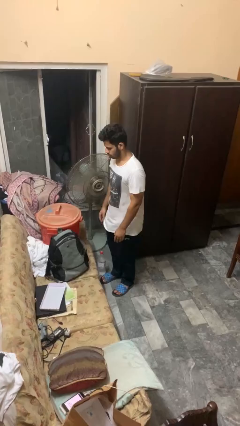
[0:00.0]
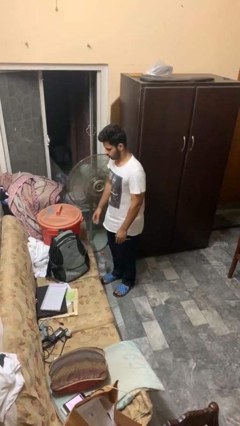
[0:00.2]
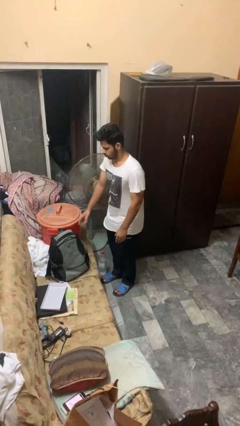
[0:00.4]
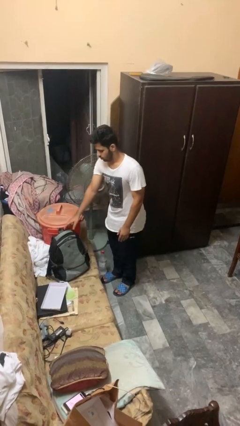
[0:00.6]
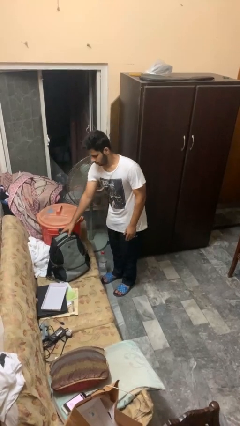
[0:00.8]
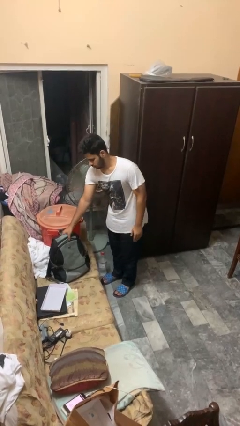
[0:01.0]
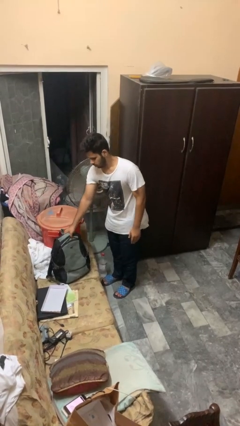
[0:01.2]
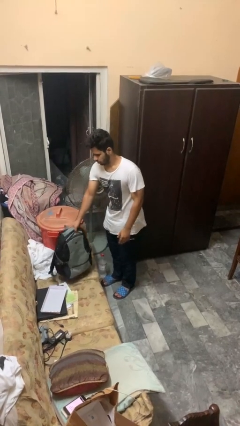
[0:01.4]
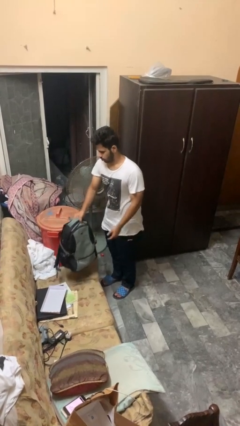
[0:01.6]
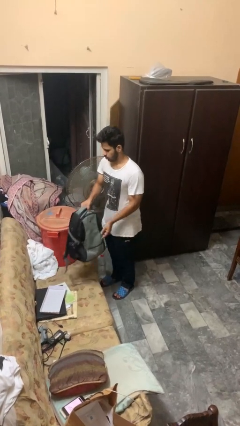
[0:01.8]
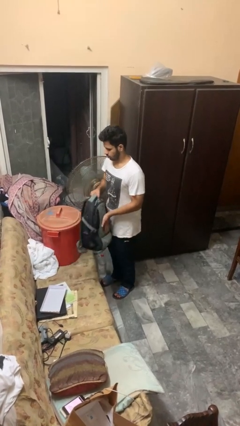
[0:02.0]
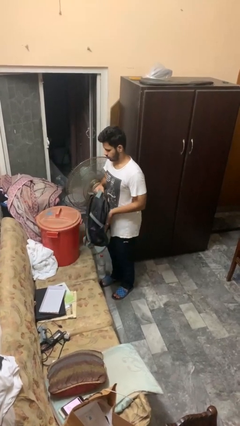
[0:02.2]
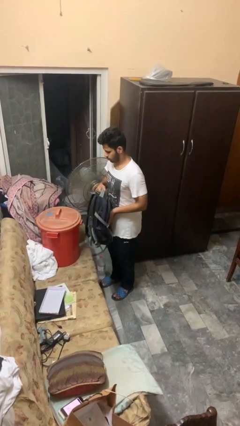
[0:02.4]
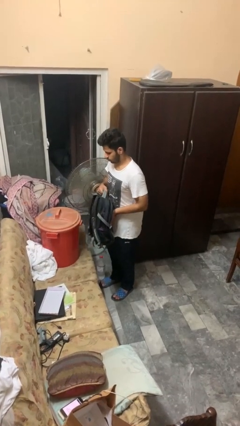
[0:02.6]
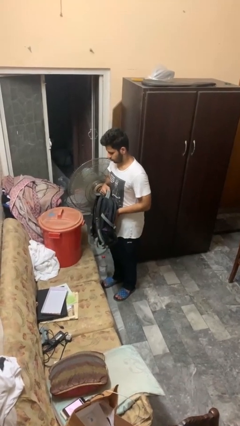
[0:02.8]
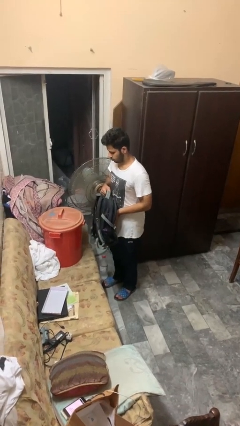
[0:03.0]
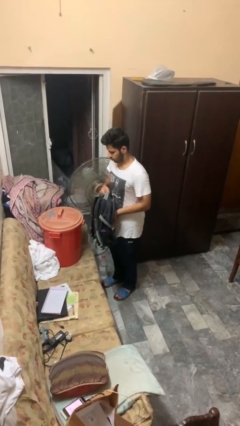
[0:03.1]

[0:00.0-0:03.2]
person picks up object from couch

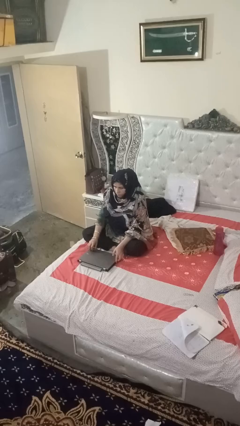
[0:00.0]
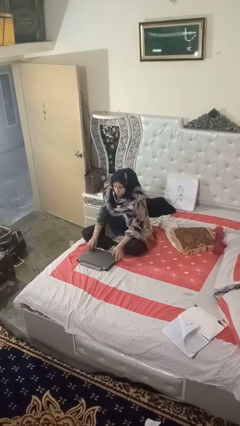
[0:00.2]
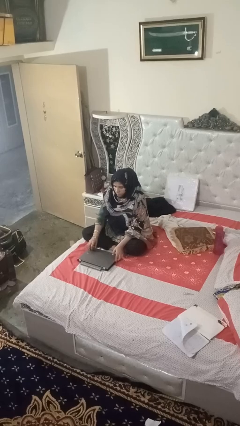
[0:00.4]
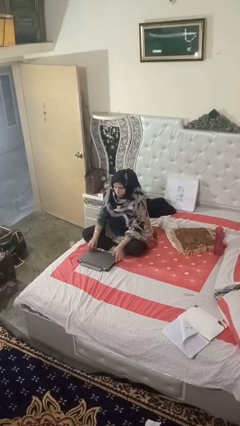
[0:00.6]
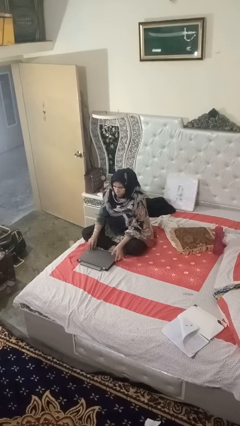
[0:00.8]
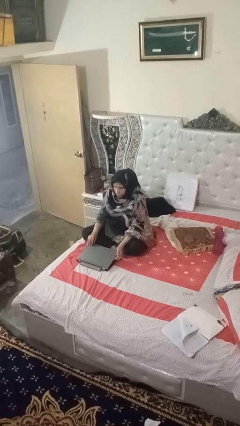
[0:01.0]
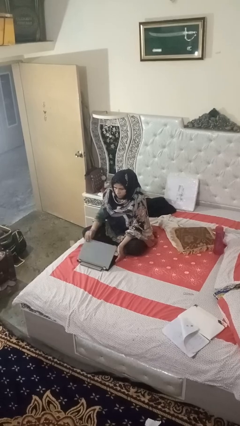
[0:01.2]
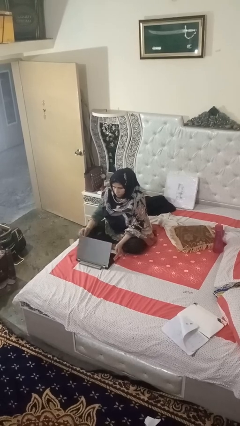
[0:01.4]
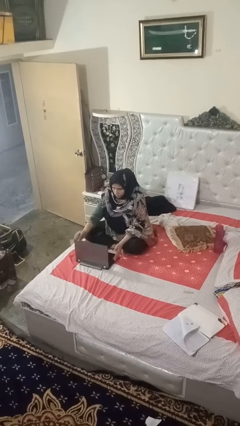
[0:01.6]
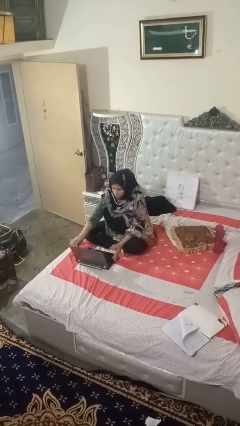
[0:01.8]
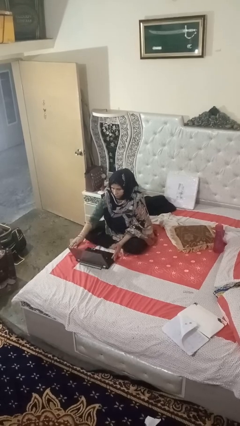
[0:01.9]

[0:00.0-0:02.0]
person opens laptop

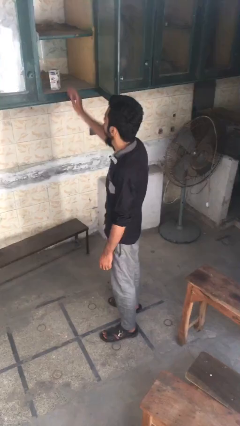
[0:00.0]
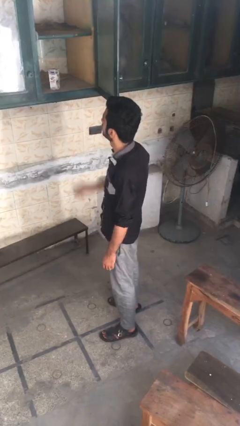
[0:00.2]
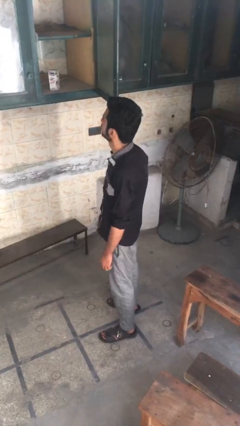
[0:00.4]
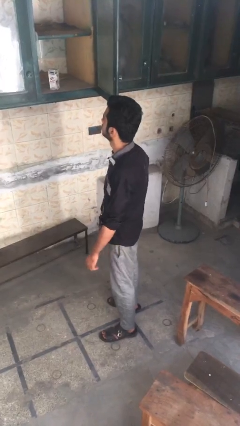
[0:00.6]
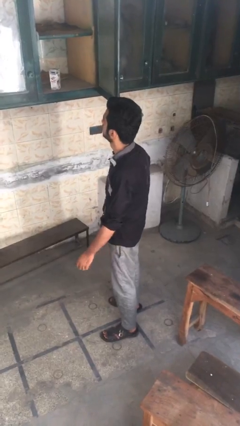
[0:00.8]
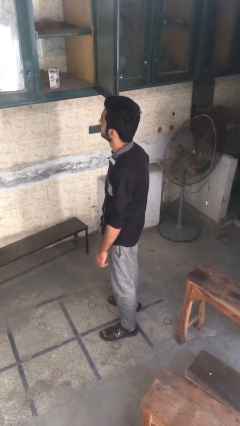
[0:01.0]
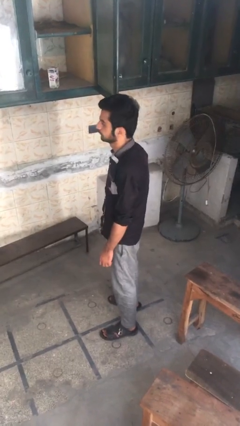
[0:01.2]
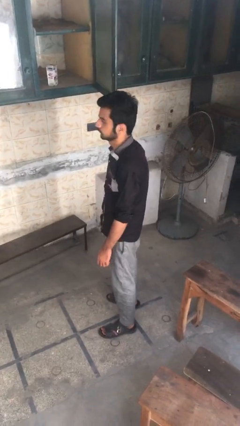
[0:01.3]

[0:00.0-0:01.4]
person puts object in cabinet

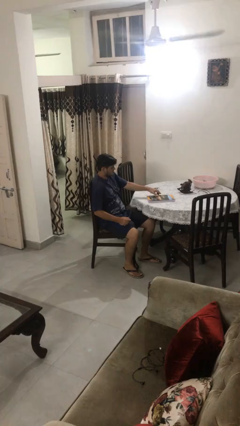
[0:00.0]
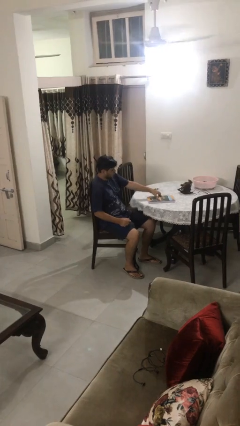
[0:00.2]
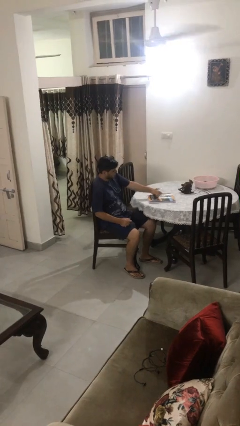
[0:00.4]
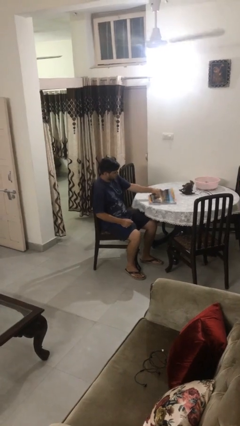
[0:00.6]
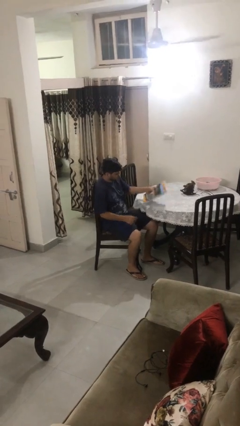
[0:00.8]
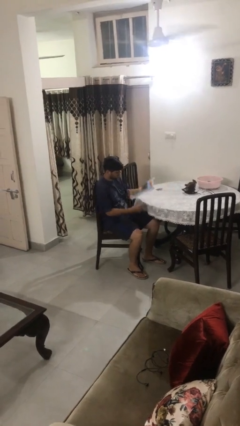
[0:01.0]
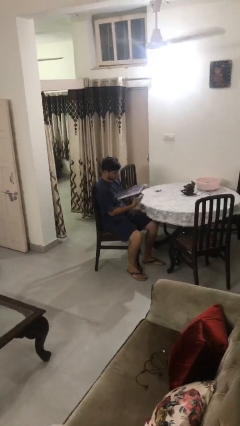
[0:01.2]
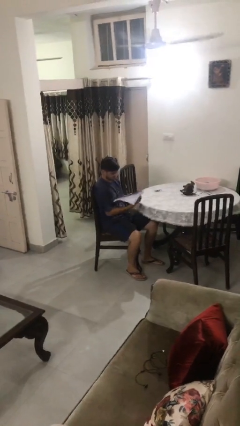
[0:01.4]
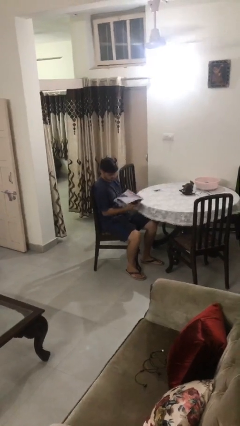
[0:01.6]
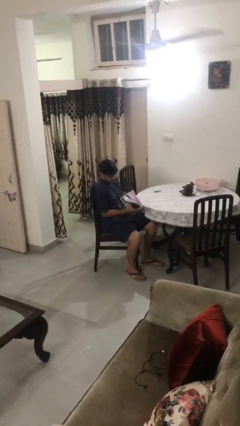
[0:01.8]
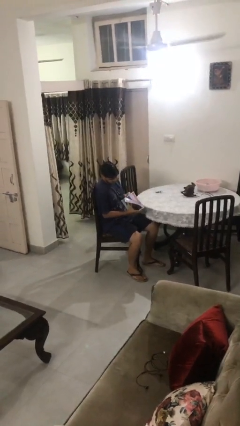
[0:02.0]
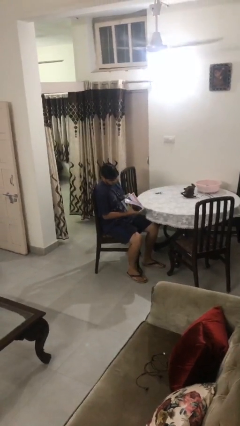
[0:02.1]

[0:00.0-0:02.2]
person picks up object from table

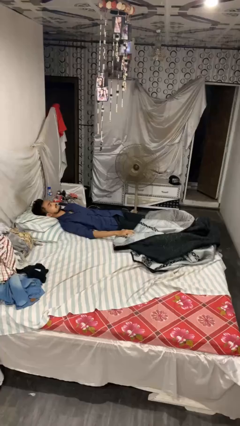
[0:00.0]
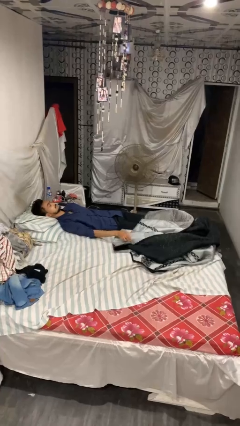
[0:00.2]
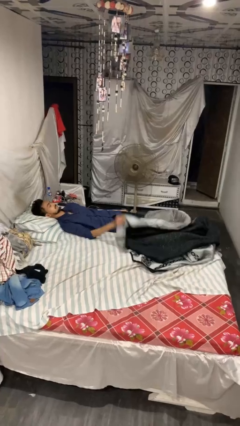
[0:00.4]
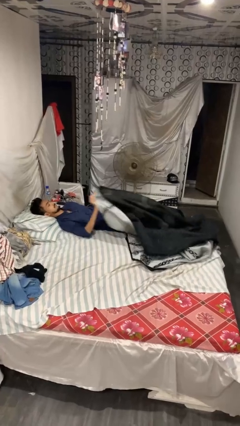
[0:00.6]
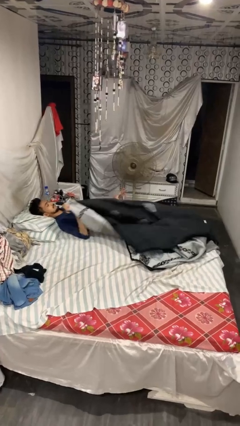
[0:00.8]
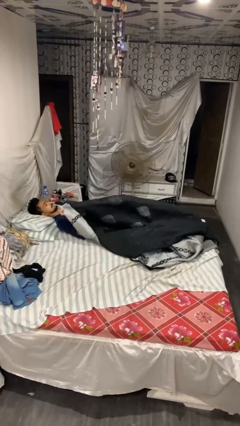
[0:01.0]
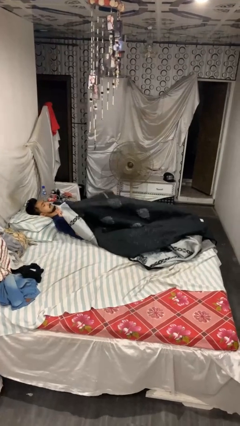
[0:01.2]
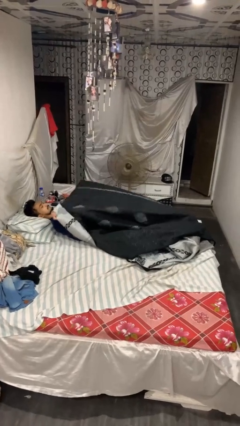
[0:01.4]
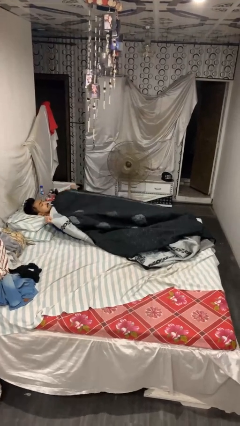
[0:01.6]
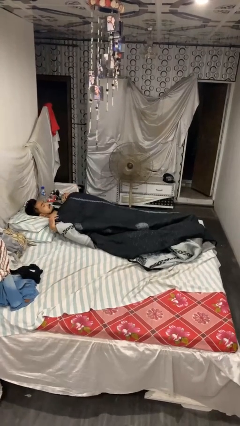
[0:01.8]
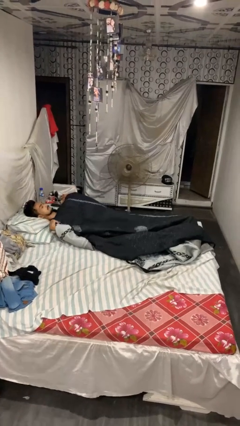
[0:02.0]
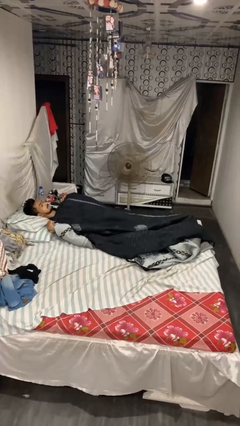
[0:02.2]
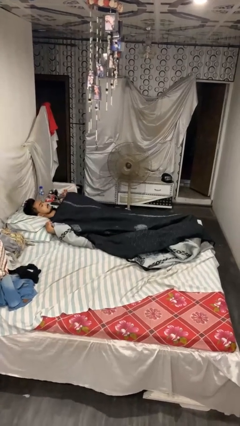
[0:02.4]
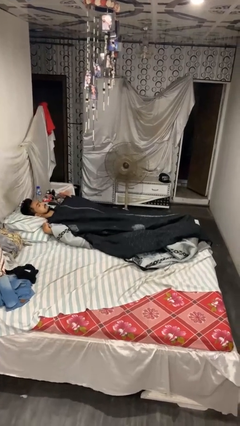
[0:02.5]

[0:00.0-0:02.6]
person covers with blanket

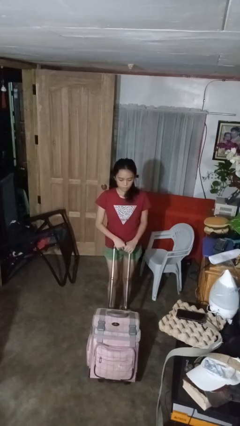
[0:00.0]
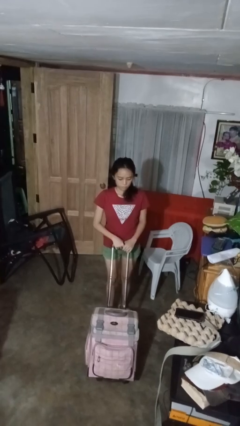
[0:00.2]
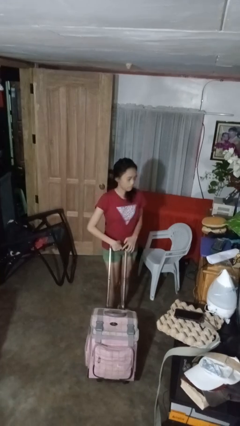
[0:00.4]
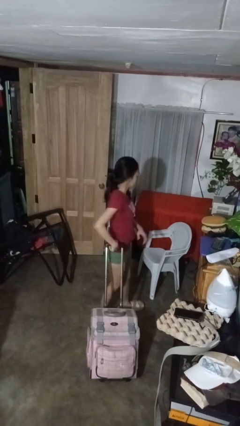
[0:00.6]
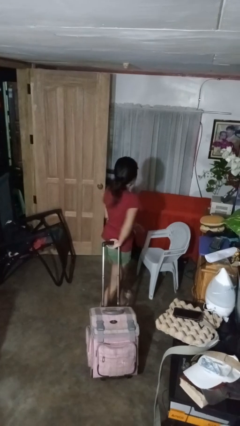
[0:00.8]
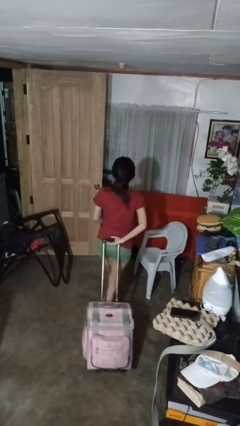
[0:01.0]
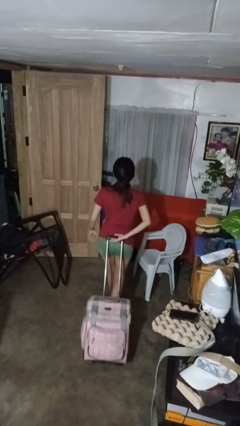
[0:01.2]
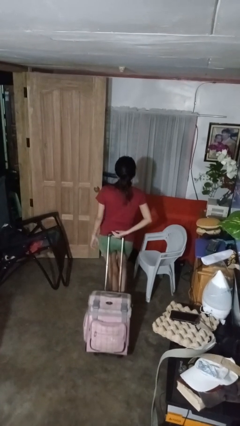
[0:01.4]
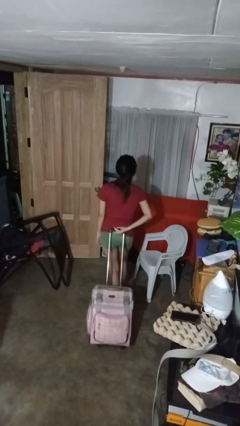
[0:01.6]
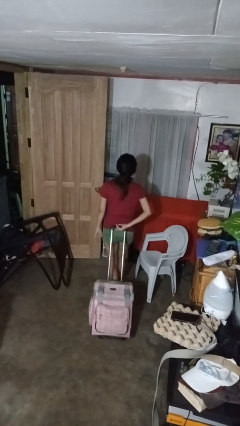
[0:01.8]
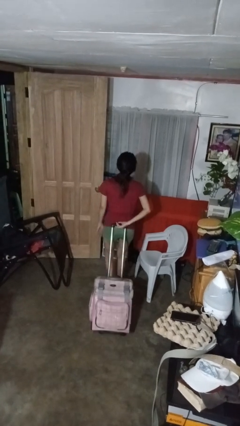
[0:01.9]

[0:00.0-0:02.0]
person pulls wheeled cart

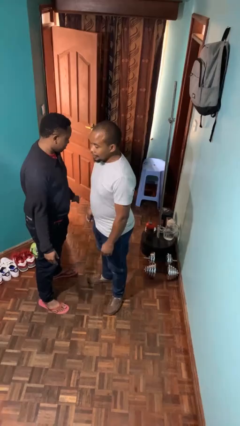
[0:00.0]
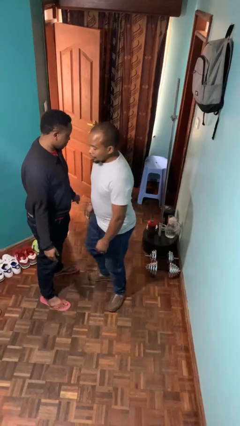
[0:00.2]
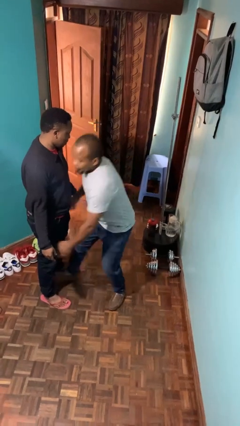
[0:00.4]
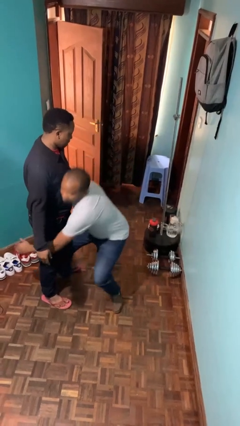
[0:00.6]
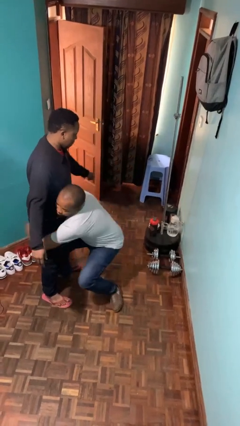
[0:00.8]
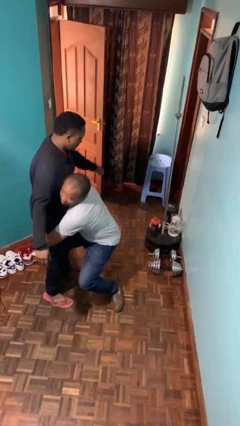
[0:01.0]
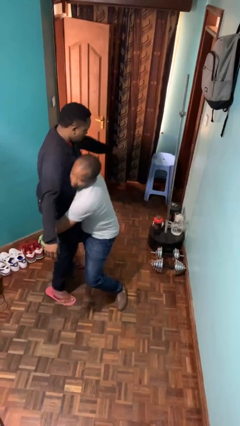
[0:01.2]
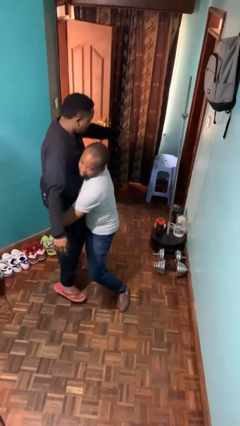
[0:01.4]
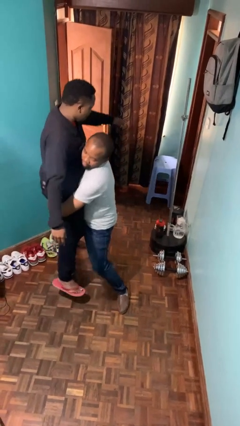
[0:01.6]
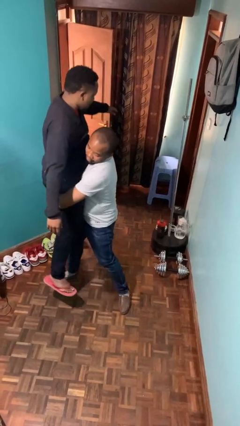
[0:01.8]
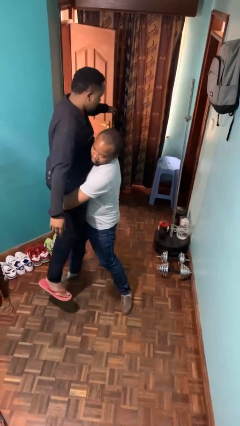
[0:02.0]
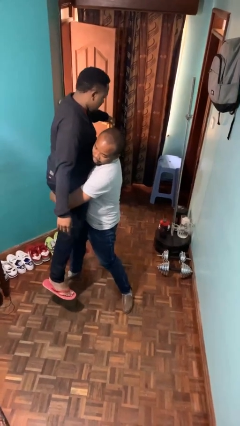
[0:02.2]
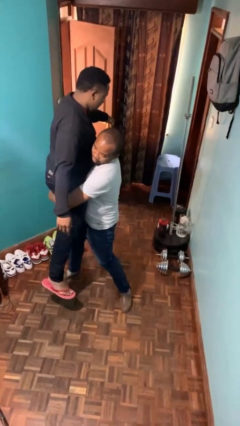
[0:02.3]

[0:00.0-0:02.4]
person picks up person

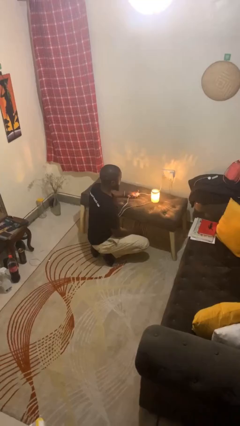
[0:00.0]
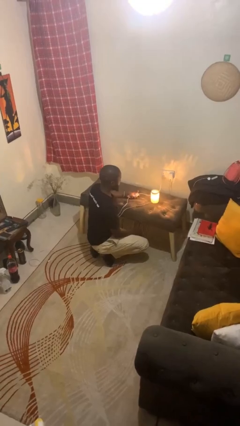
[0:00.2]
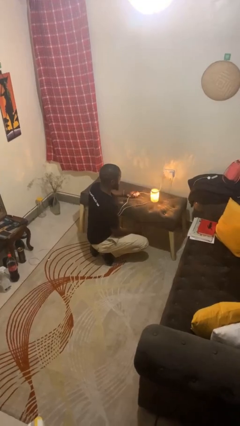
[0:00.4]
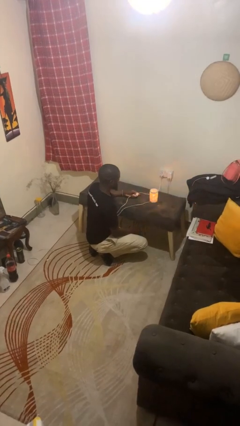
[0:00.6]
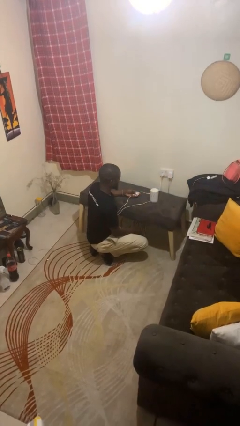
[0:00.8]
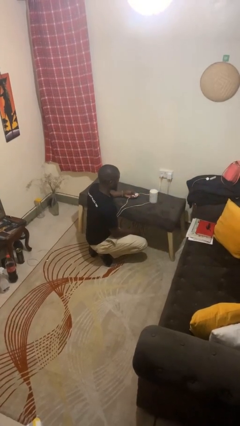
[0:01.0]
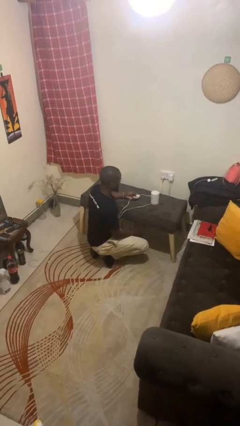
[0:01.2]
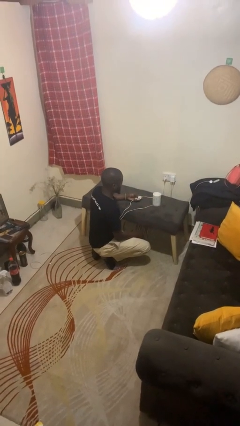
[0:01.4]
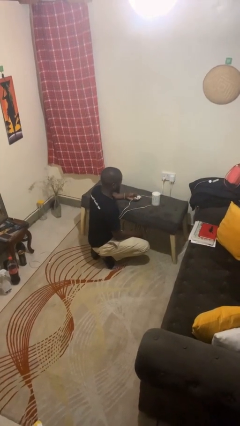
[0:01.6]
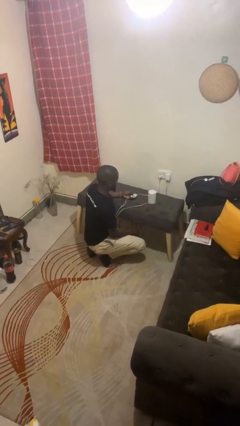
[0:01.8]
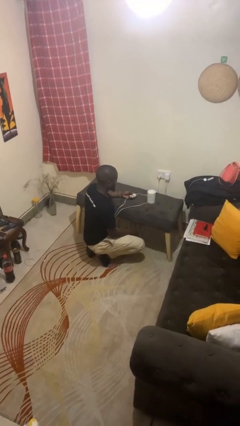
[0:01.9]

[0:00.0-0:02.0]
person turns off lamp
